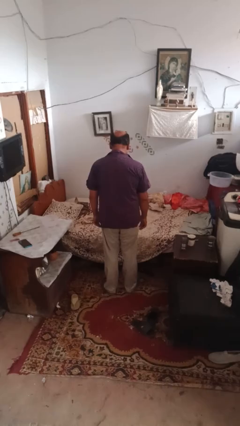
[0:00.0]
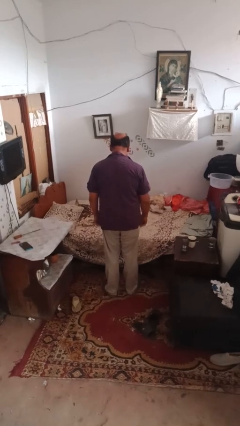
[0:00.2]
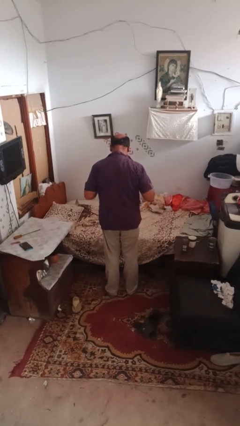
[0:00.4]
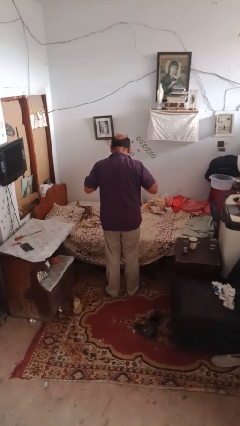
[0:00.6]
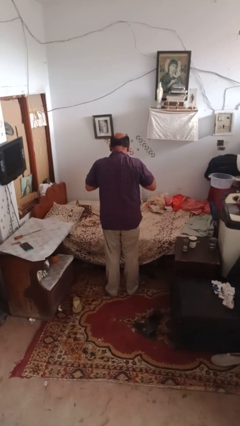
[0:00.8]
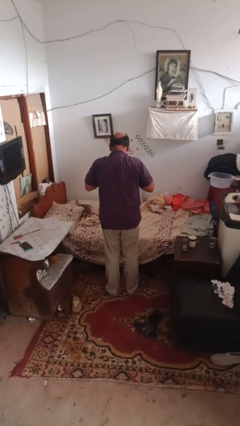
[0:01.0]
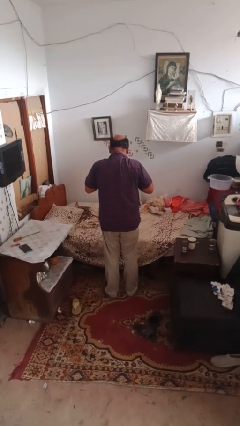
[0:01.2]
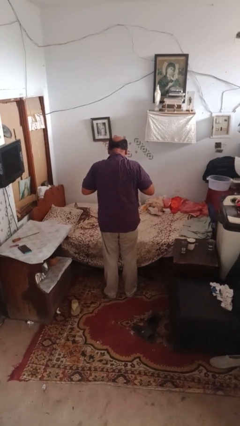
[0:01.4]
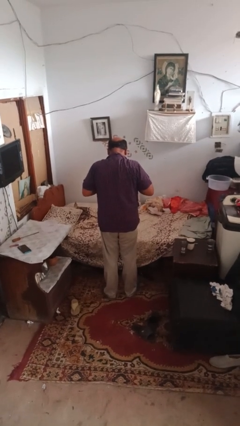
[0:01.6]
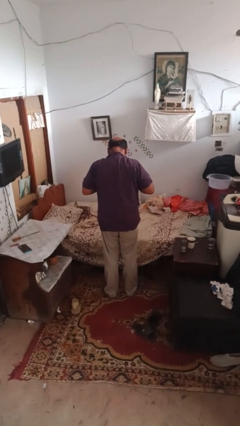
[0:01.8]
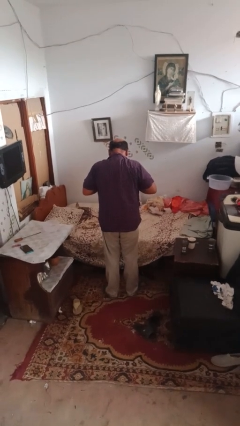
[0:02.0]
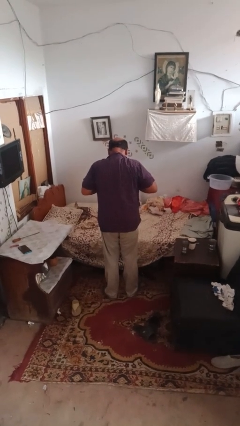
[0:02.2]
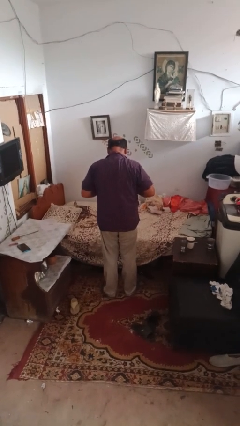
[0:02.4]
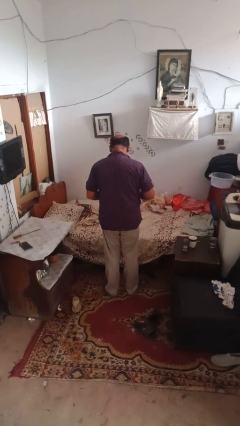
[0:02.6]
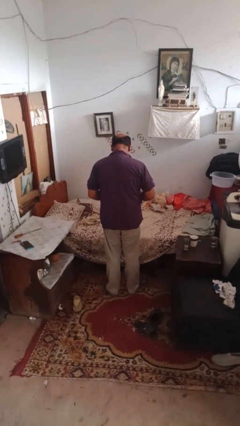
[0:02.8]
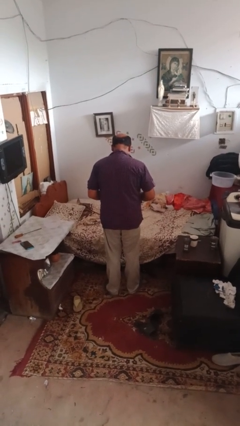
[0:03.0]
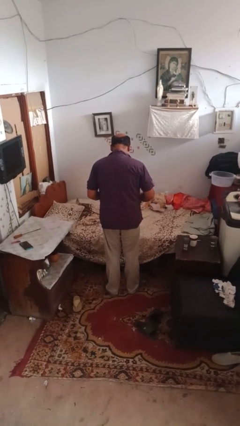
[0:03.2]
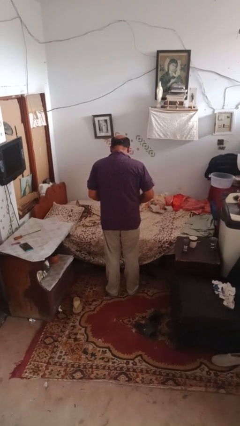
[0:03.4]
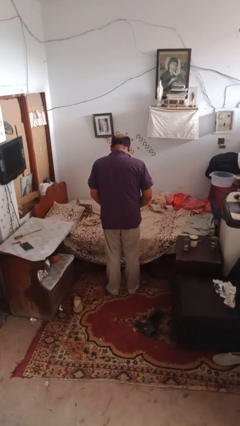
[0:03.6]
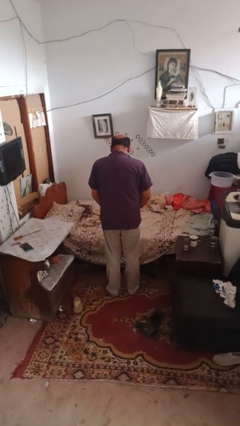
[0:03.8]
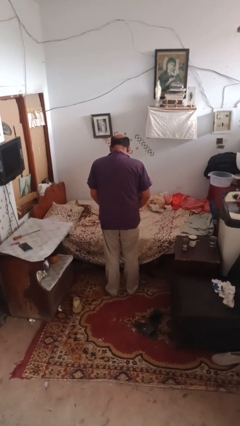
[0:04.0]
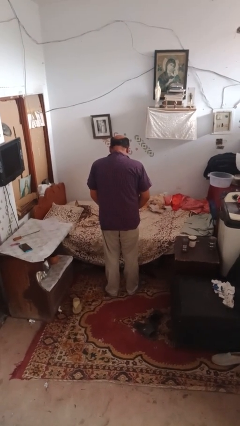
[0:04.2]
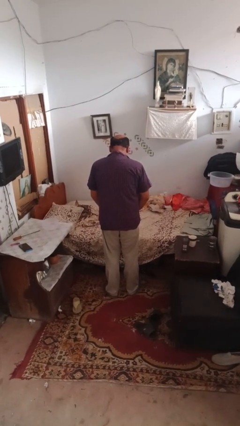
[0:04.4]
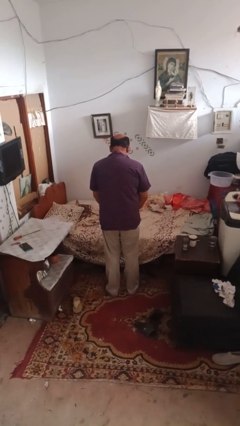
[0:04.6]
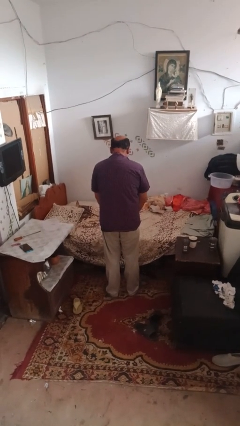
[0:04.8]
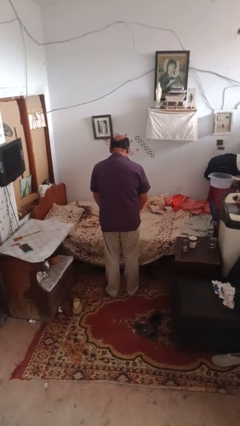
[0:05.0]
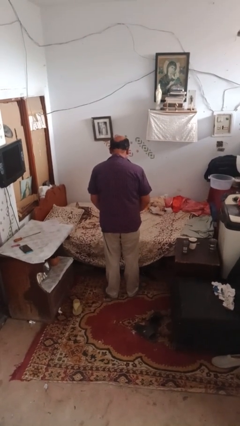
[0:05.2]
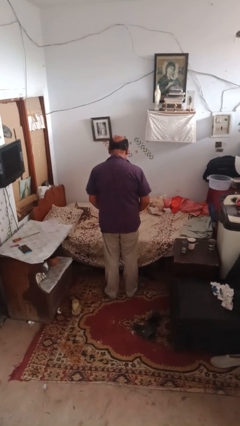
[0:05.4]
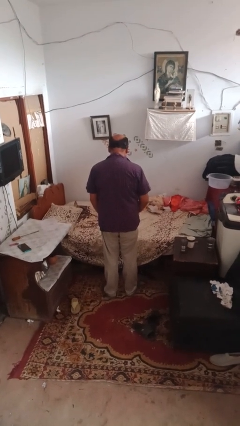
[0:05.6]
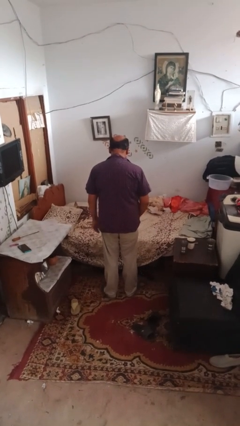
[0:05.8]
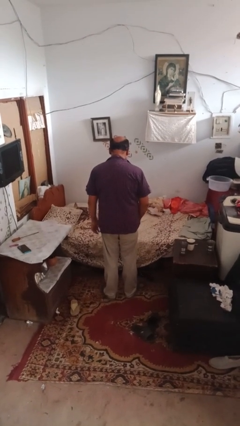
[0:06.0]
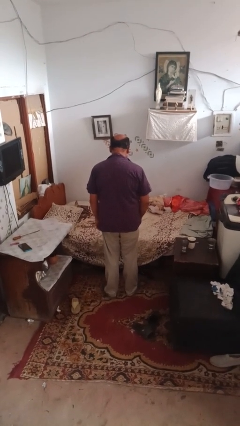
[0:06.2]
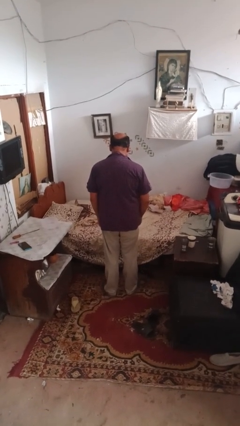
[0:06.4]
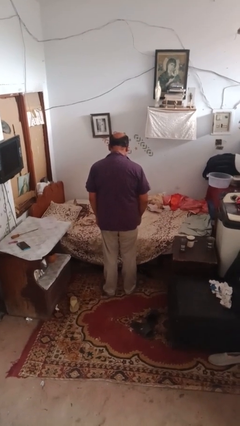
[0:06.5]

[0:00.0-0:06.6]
person unbuttons shirt

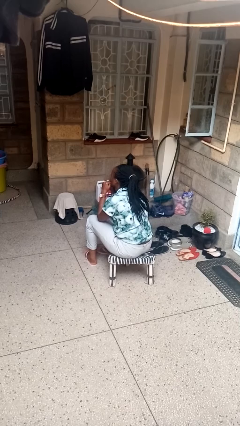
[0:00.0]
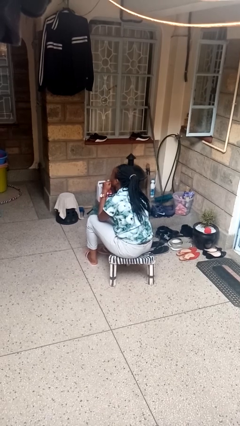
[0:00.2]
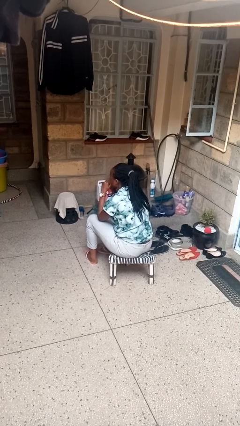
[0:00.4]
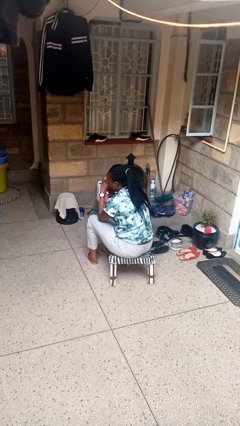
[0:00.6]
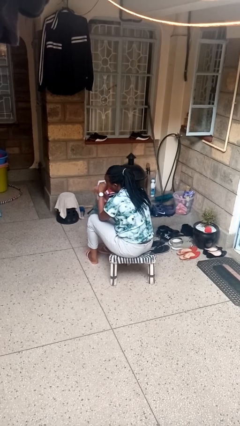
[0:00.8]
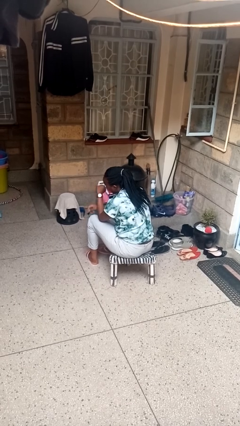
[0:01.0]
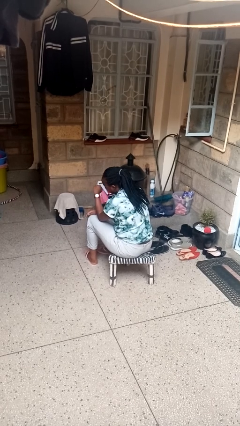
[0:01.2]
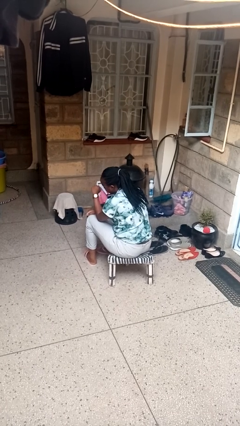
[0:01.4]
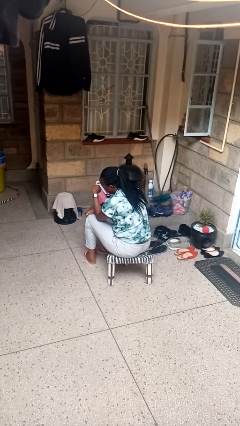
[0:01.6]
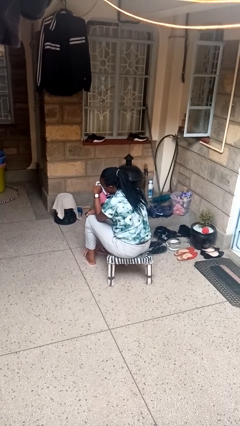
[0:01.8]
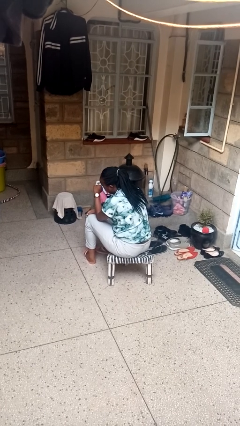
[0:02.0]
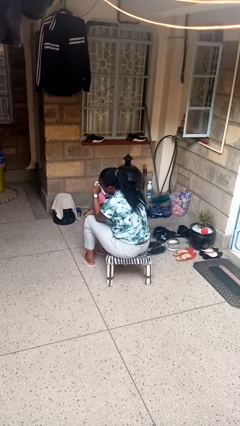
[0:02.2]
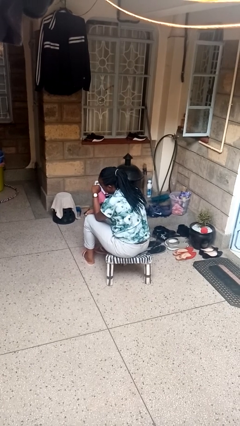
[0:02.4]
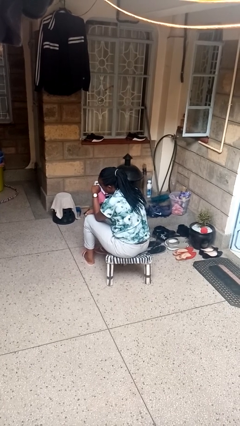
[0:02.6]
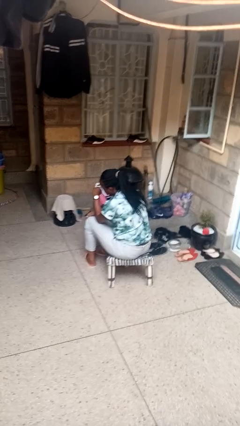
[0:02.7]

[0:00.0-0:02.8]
person looks at wristwatch

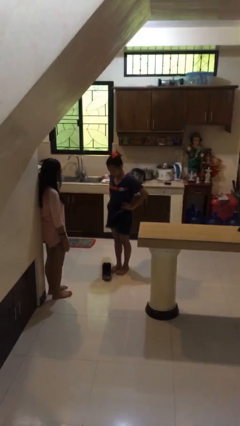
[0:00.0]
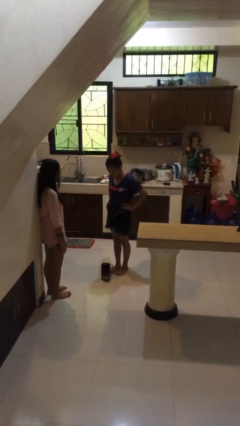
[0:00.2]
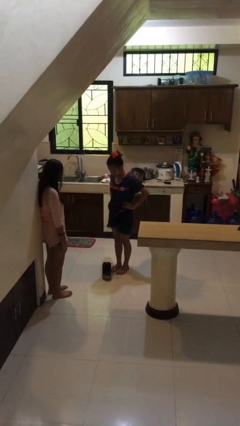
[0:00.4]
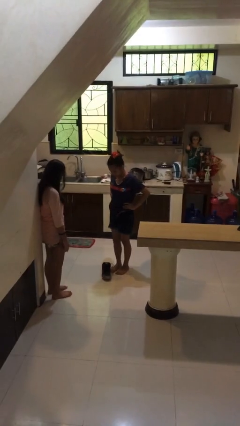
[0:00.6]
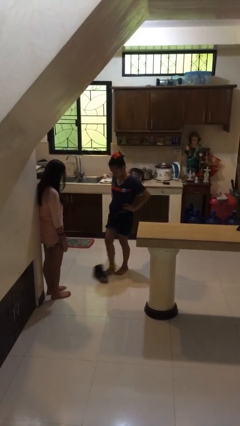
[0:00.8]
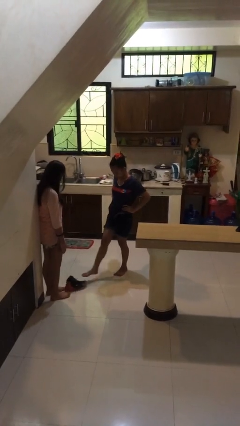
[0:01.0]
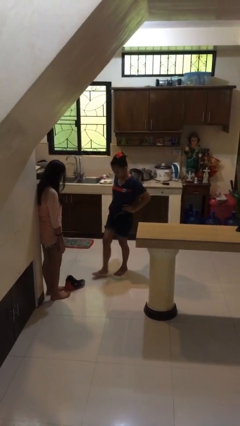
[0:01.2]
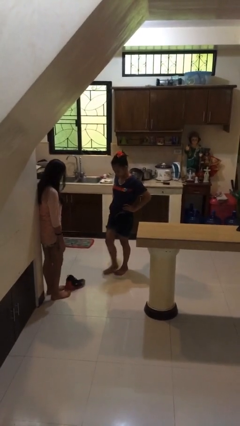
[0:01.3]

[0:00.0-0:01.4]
person kicks object to person

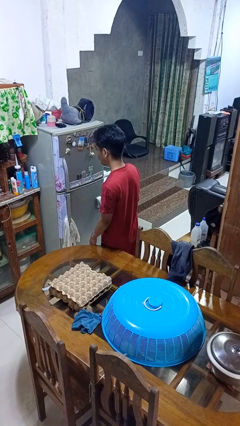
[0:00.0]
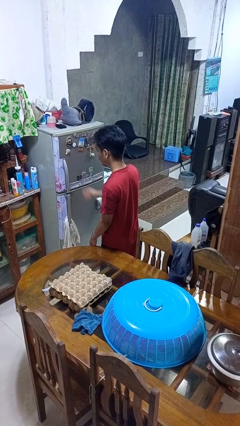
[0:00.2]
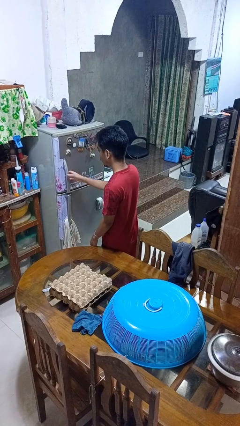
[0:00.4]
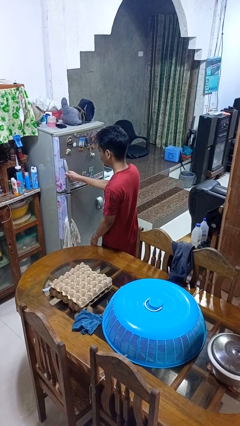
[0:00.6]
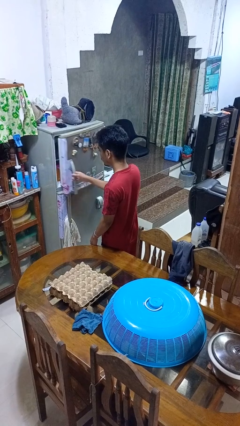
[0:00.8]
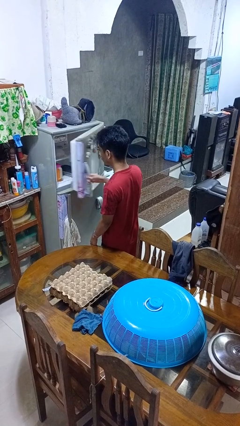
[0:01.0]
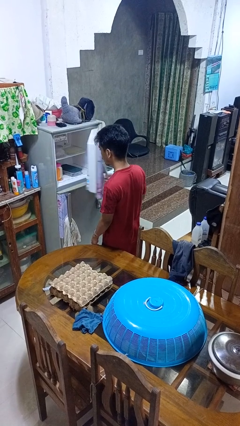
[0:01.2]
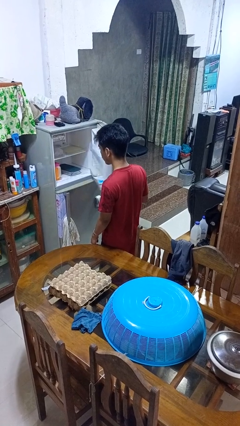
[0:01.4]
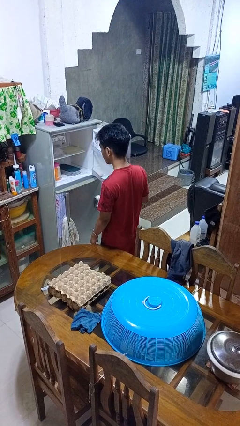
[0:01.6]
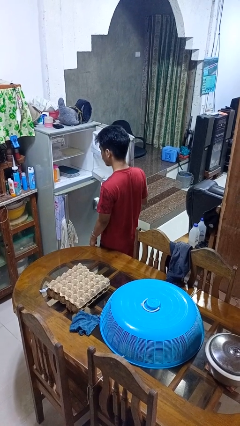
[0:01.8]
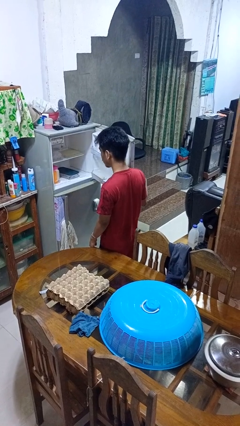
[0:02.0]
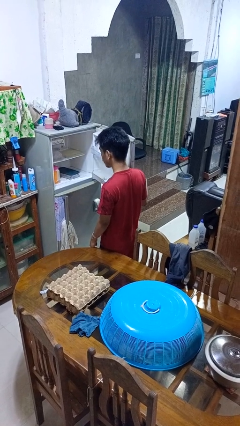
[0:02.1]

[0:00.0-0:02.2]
person opens refrigerator

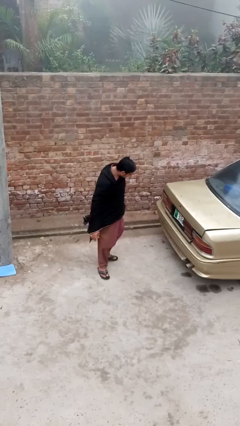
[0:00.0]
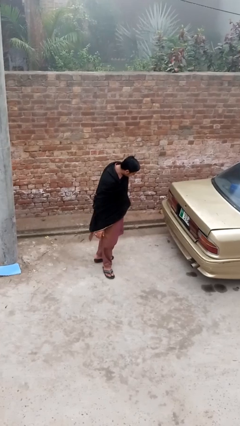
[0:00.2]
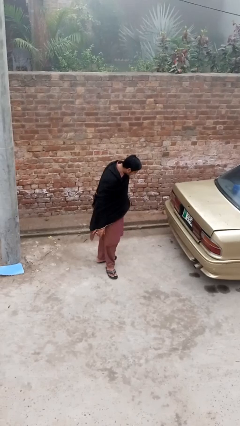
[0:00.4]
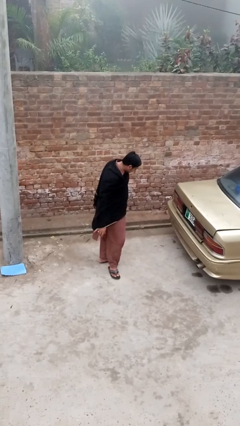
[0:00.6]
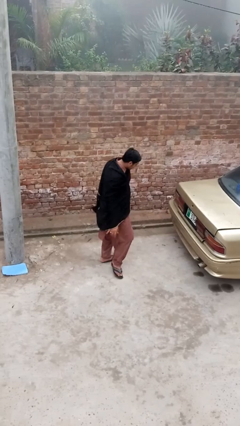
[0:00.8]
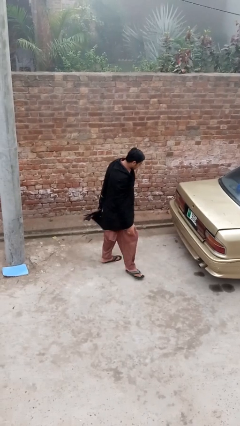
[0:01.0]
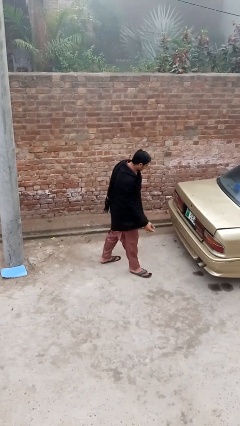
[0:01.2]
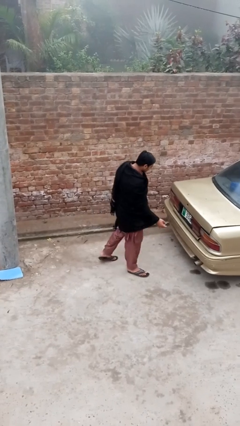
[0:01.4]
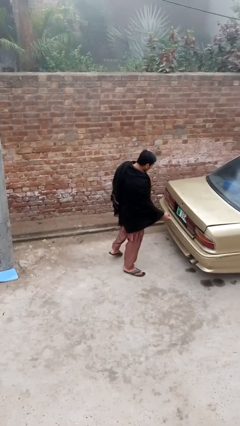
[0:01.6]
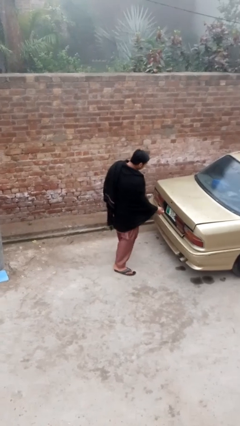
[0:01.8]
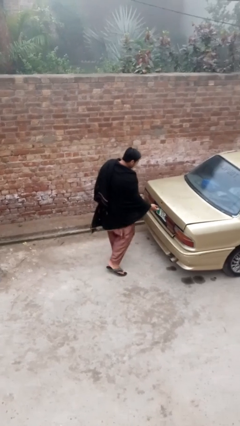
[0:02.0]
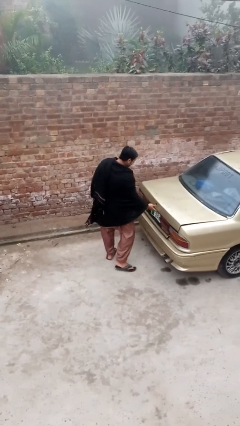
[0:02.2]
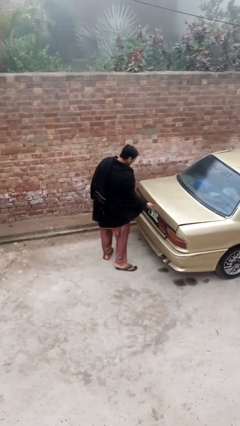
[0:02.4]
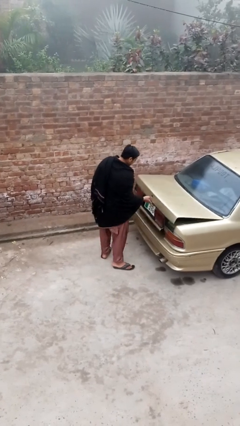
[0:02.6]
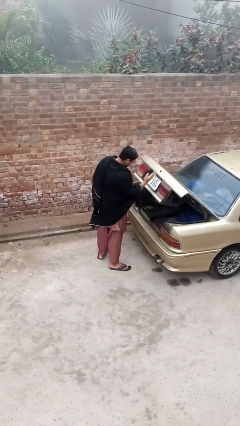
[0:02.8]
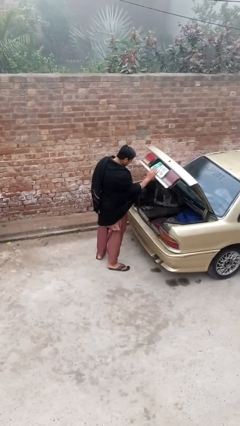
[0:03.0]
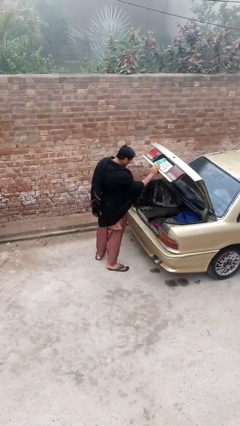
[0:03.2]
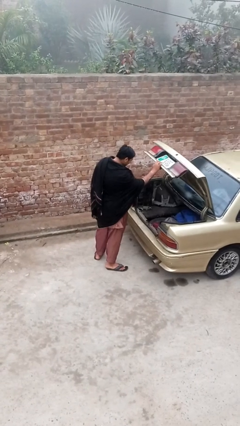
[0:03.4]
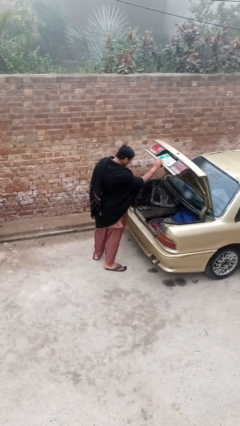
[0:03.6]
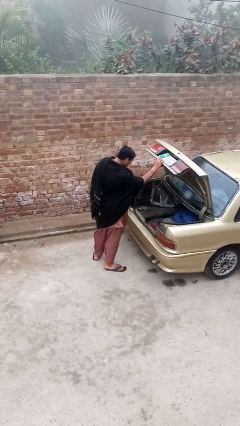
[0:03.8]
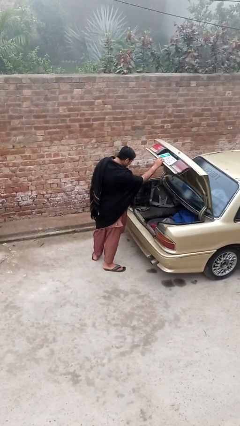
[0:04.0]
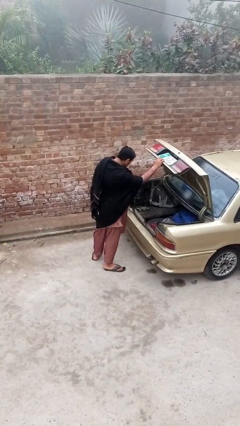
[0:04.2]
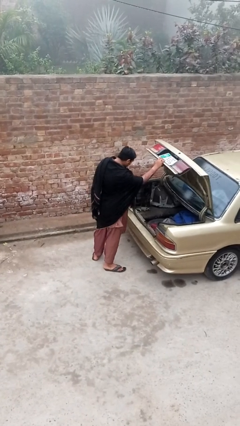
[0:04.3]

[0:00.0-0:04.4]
person opens car trunk

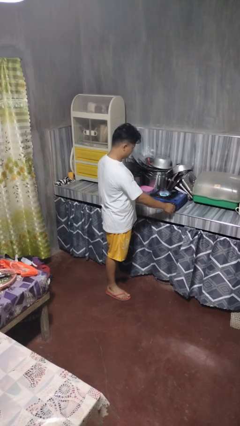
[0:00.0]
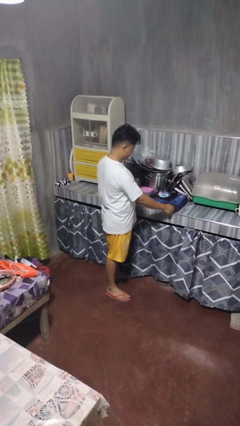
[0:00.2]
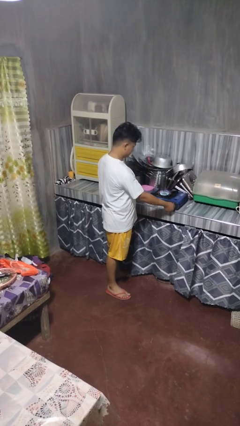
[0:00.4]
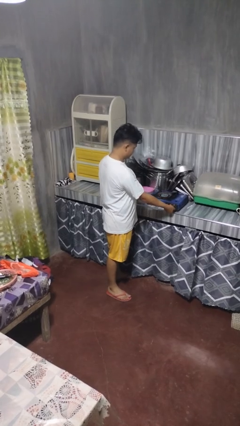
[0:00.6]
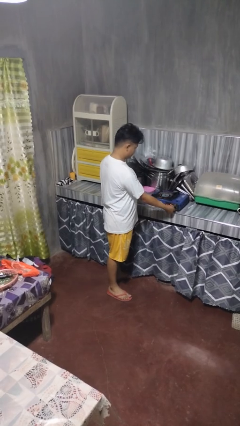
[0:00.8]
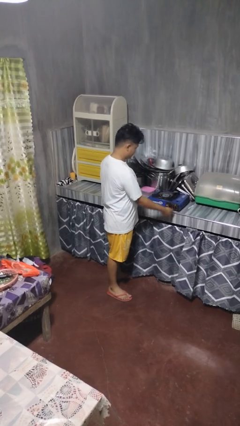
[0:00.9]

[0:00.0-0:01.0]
person turns off stovetop
